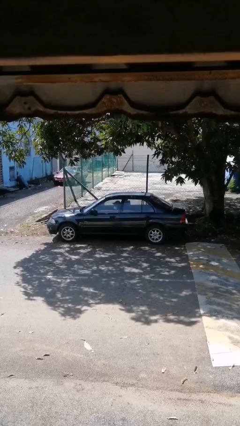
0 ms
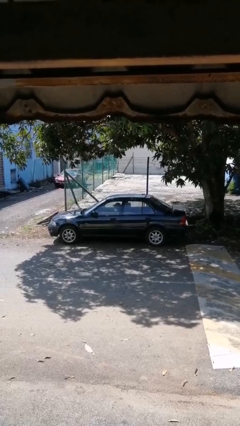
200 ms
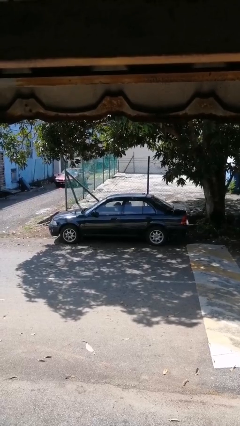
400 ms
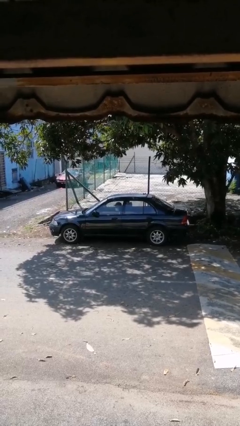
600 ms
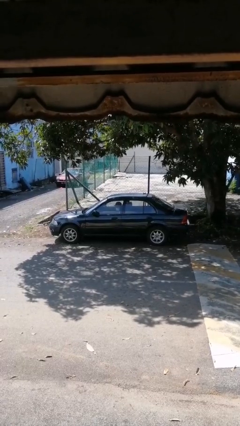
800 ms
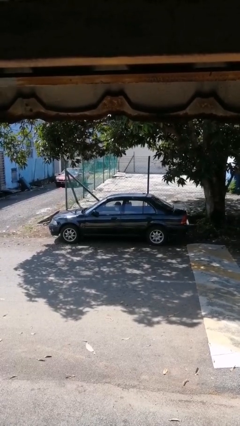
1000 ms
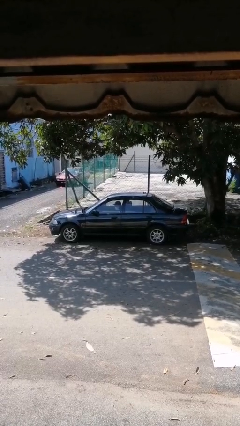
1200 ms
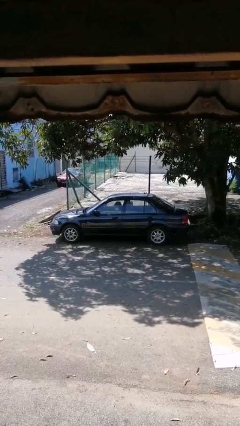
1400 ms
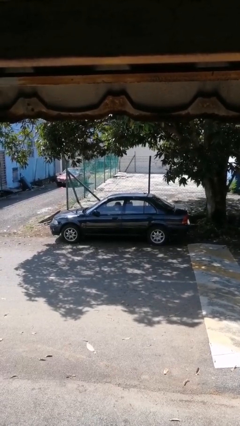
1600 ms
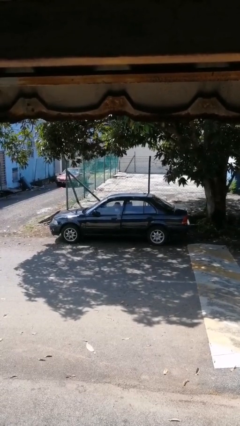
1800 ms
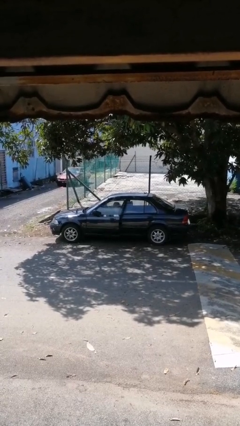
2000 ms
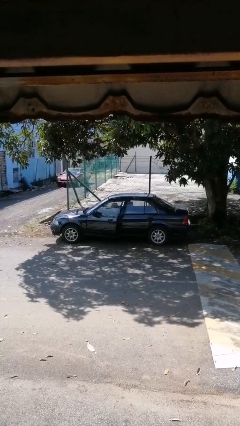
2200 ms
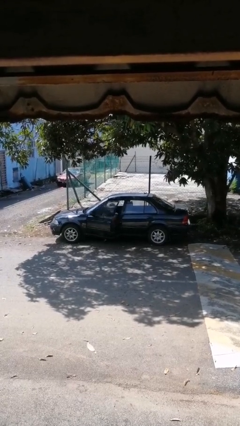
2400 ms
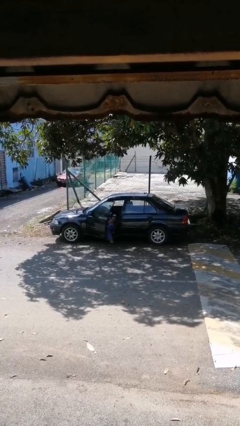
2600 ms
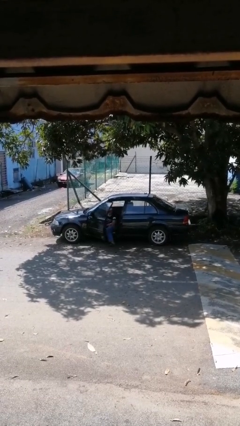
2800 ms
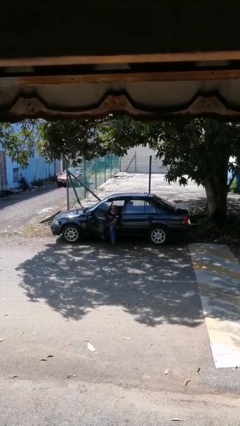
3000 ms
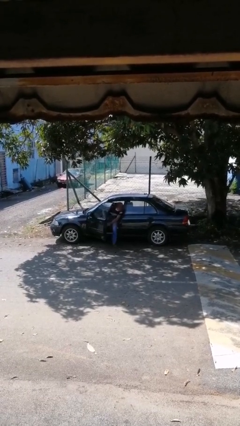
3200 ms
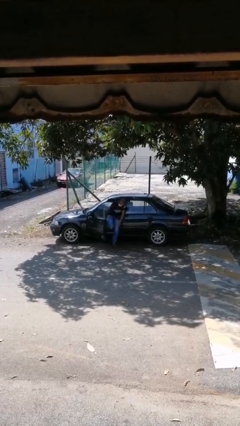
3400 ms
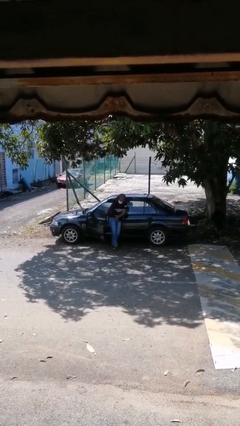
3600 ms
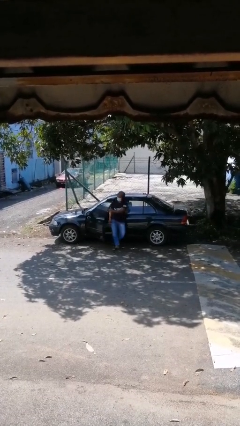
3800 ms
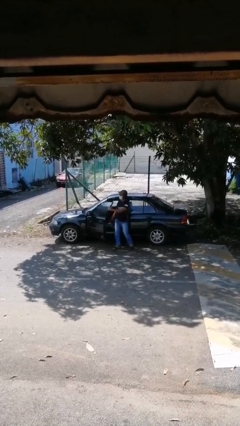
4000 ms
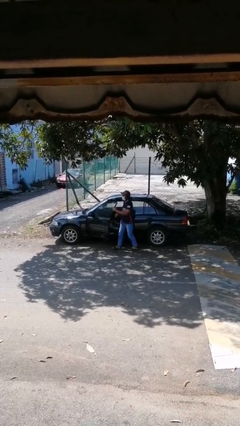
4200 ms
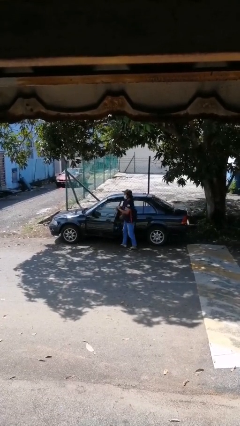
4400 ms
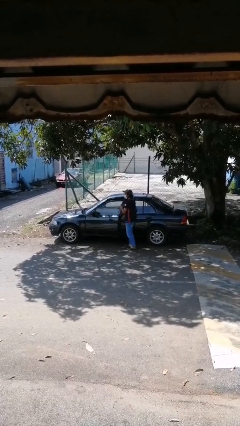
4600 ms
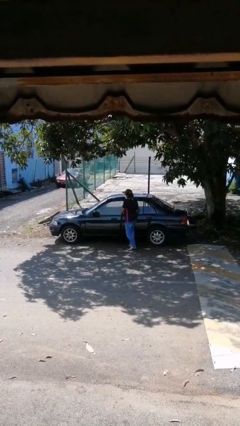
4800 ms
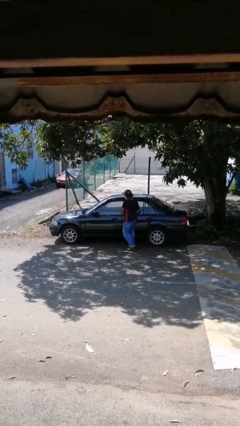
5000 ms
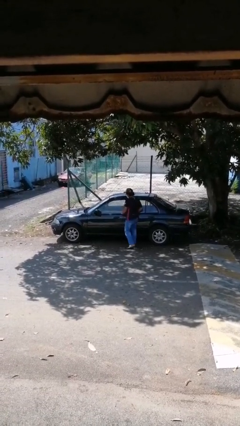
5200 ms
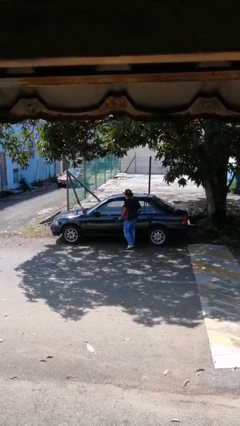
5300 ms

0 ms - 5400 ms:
car drops off person

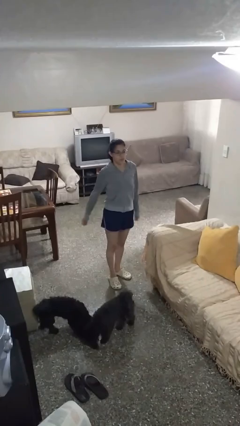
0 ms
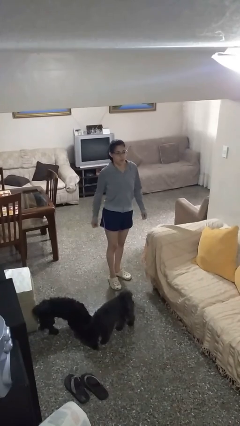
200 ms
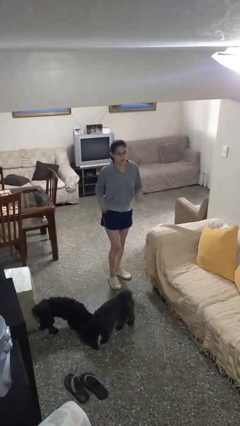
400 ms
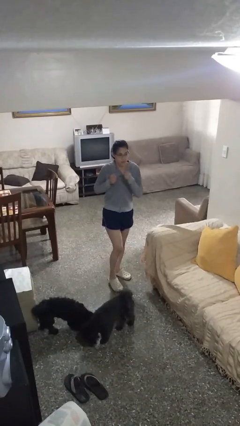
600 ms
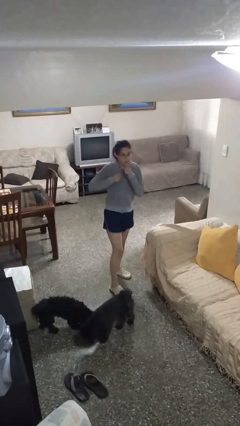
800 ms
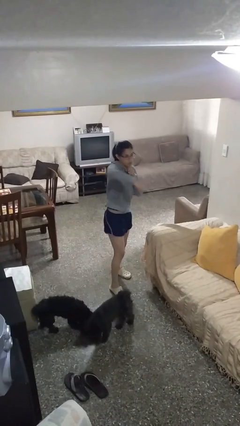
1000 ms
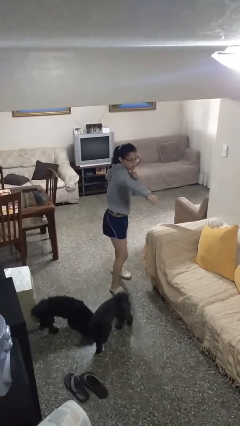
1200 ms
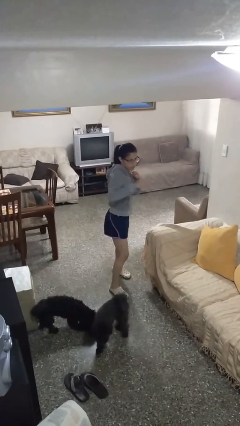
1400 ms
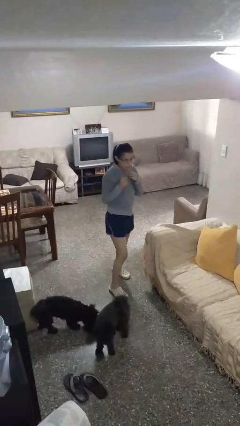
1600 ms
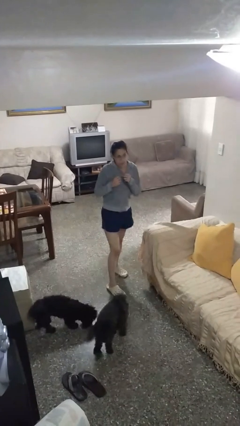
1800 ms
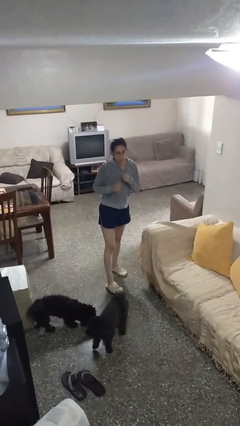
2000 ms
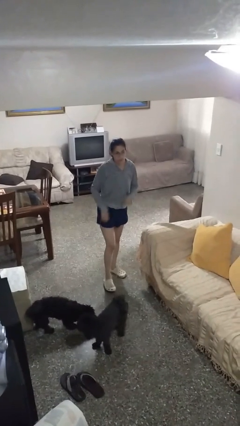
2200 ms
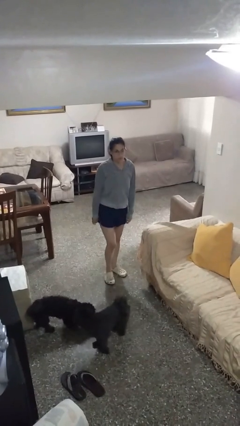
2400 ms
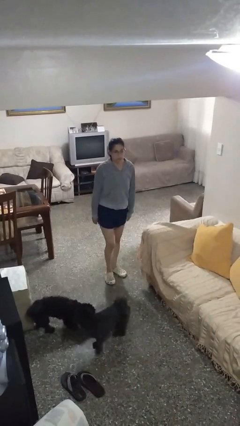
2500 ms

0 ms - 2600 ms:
person karate chop

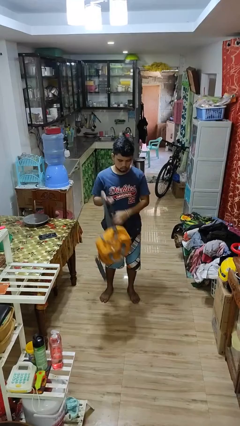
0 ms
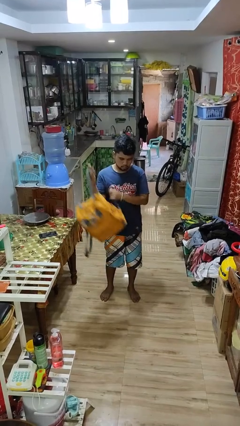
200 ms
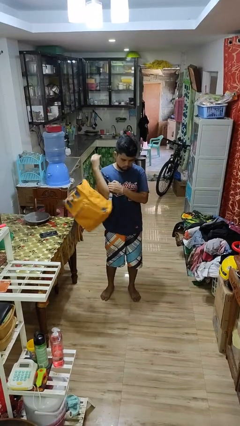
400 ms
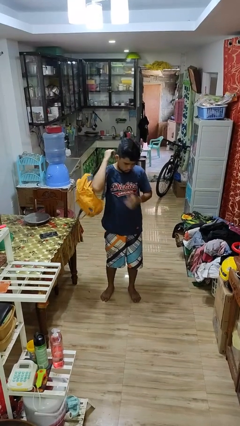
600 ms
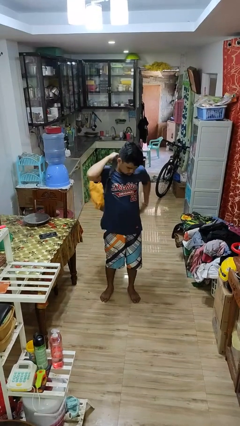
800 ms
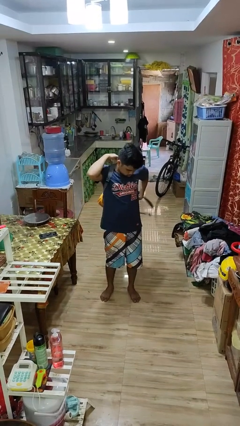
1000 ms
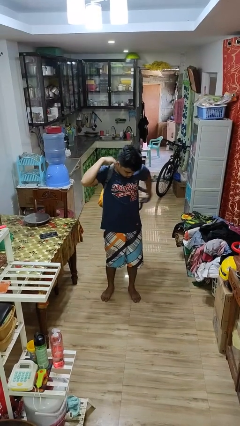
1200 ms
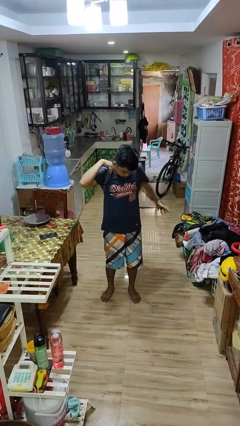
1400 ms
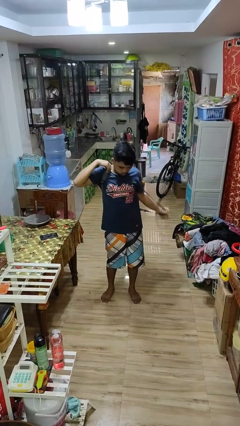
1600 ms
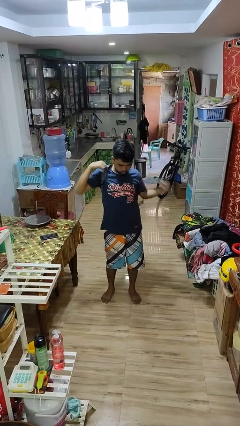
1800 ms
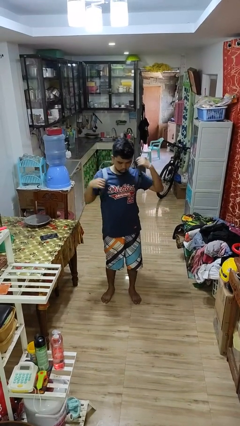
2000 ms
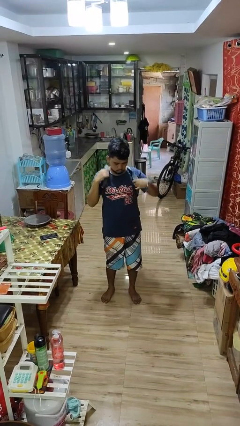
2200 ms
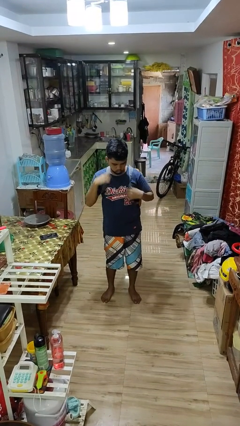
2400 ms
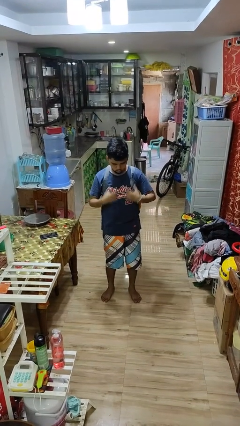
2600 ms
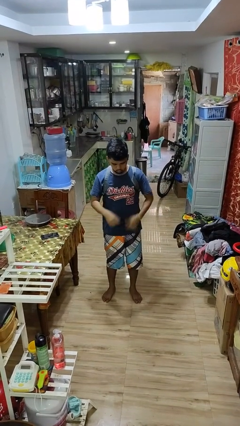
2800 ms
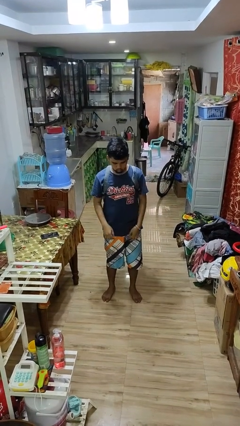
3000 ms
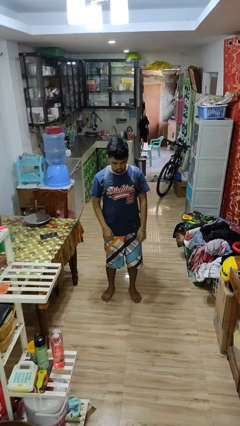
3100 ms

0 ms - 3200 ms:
person puts on backpack

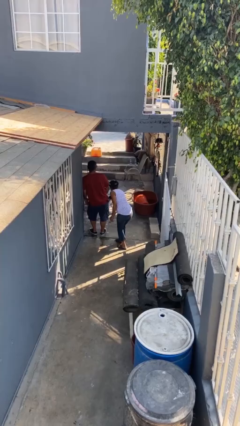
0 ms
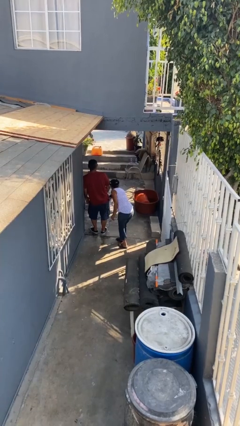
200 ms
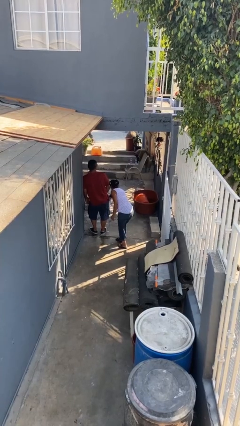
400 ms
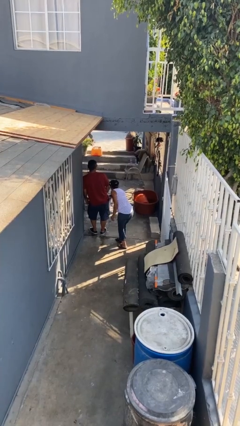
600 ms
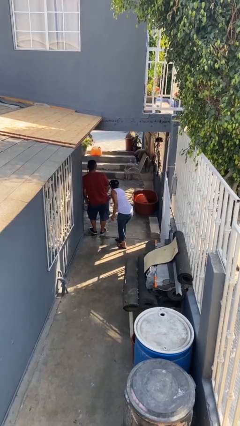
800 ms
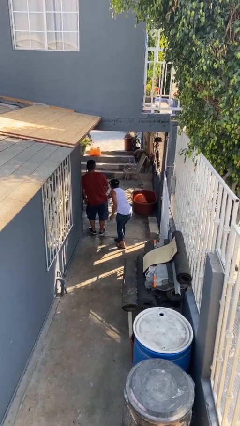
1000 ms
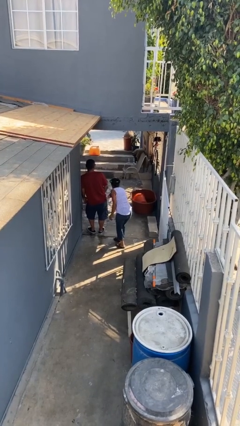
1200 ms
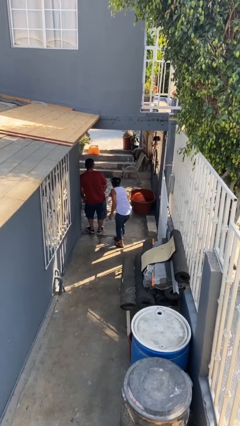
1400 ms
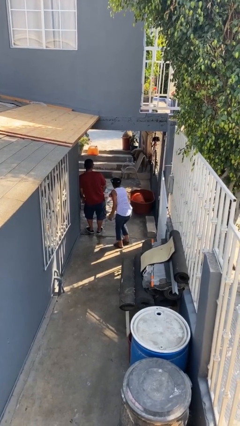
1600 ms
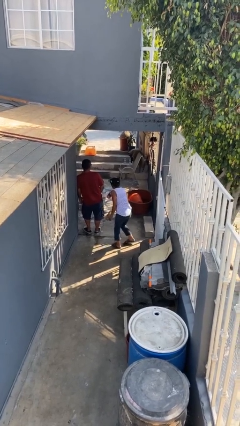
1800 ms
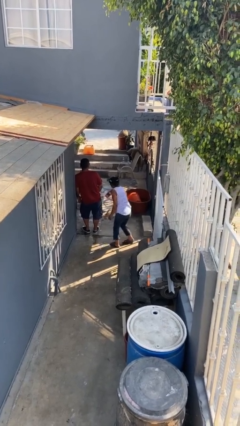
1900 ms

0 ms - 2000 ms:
person steals object from person

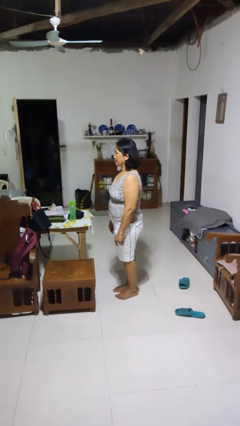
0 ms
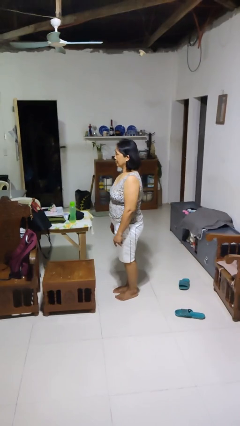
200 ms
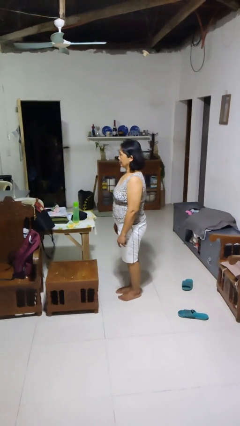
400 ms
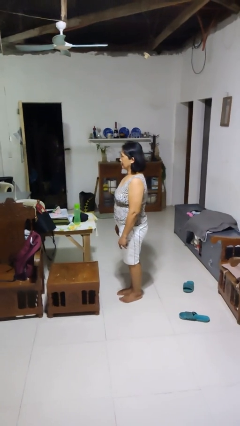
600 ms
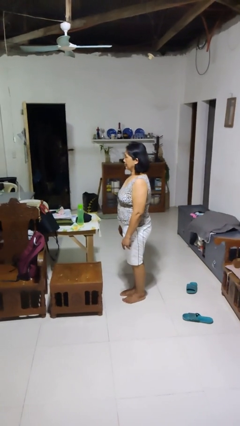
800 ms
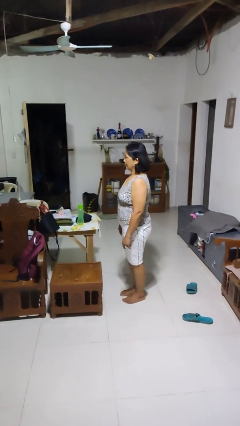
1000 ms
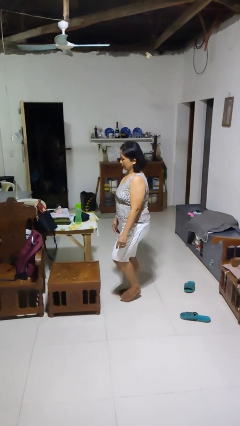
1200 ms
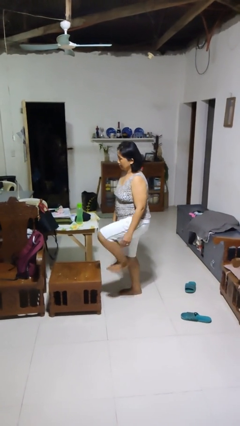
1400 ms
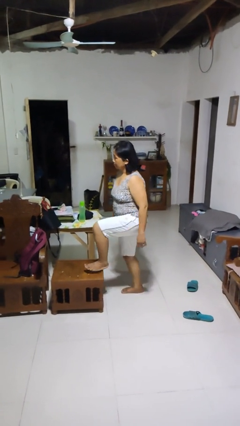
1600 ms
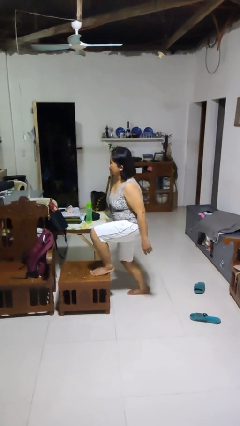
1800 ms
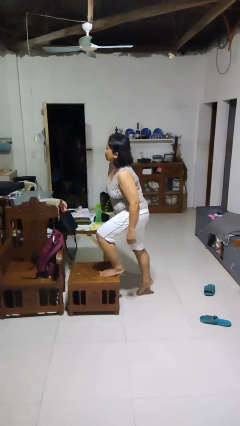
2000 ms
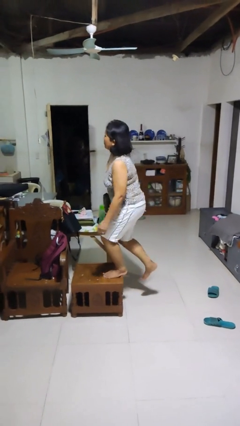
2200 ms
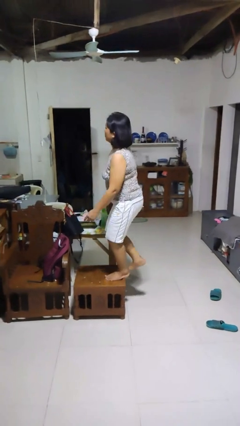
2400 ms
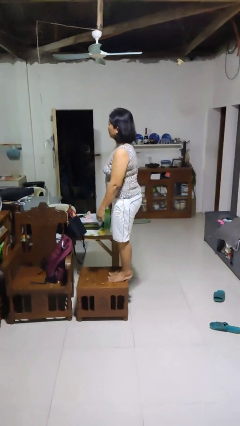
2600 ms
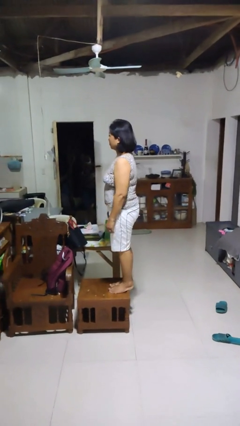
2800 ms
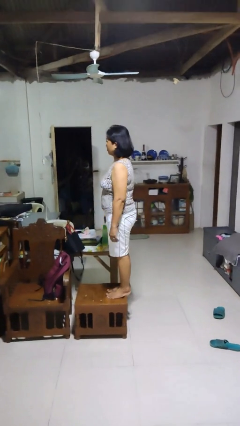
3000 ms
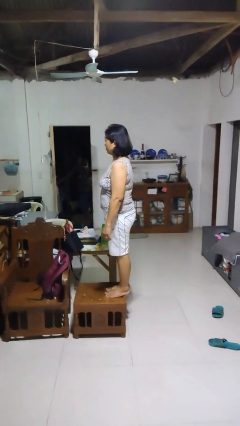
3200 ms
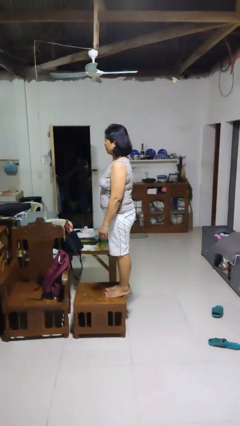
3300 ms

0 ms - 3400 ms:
person climbs on chair

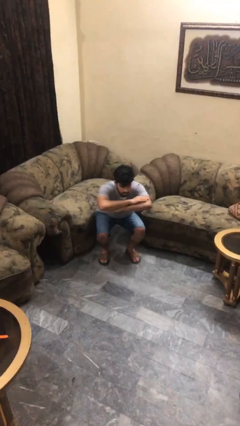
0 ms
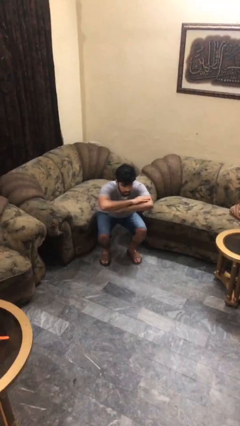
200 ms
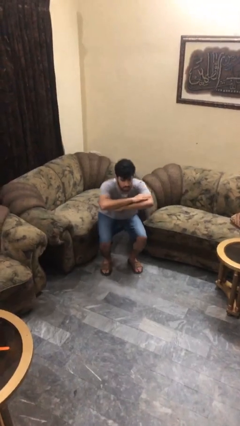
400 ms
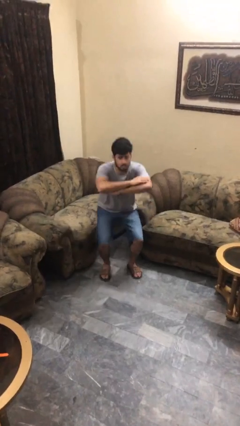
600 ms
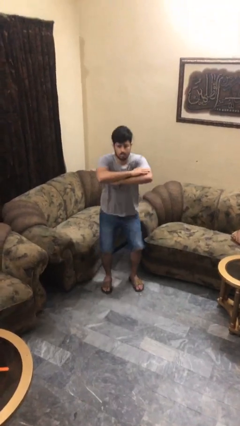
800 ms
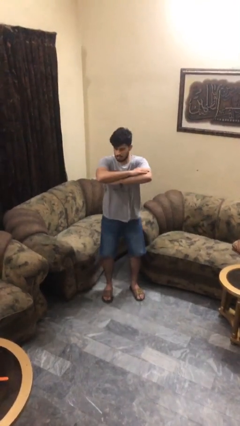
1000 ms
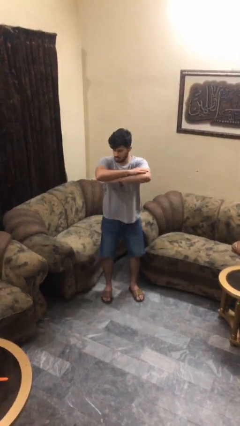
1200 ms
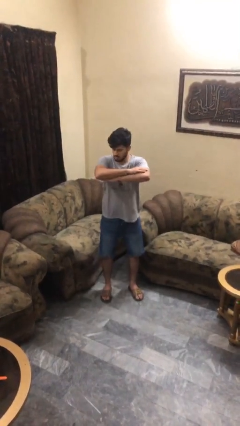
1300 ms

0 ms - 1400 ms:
person stands up
